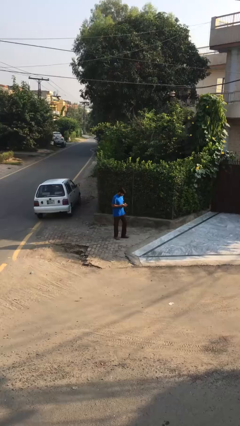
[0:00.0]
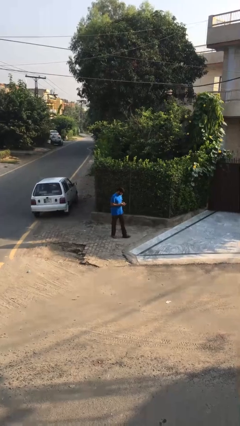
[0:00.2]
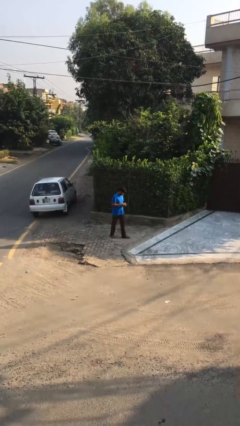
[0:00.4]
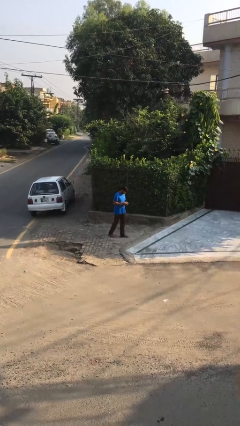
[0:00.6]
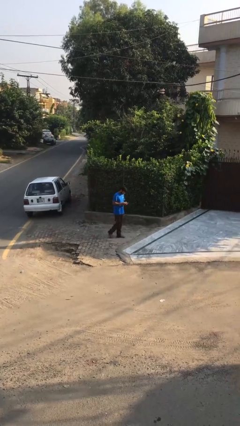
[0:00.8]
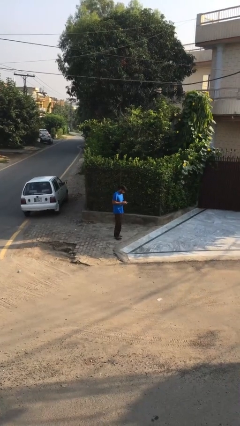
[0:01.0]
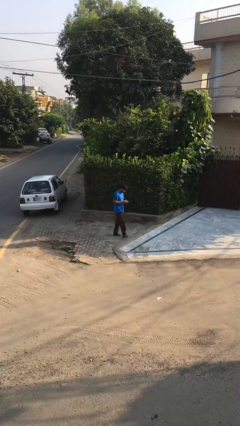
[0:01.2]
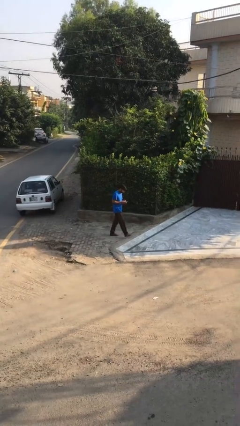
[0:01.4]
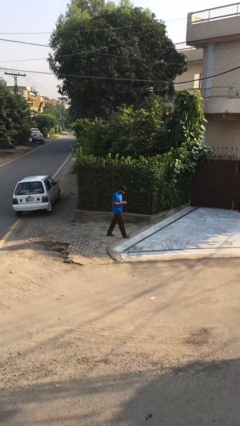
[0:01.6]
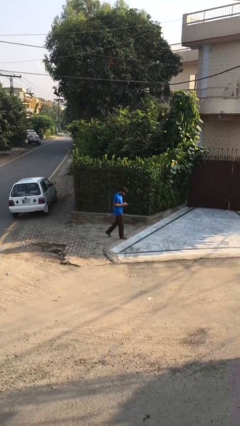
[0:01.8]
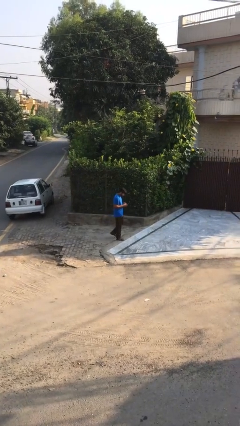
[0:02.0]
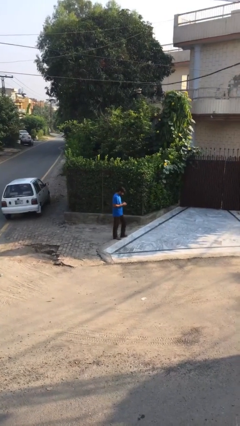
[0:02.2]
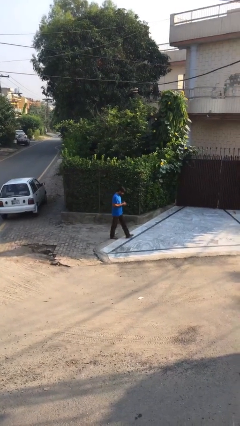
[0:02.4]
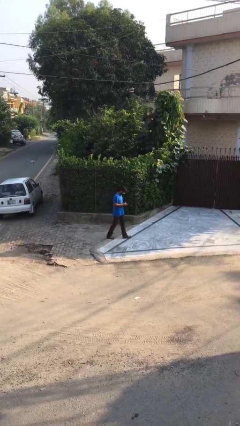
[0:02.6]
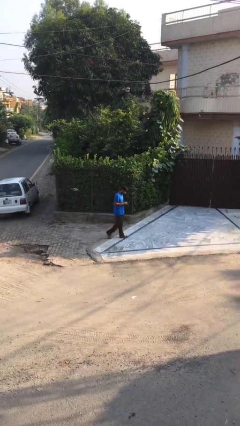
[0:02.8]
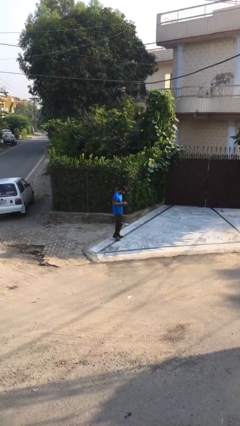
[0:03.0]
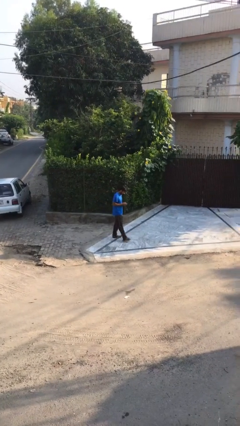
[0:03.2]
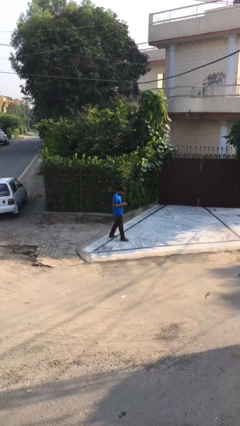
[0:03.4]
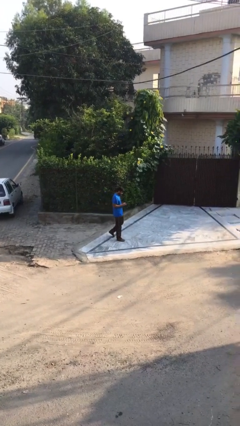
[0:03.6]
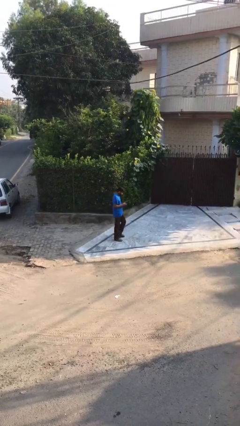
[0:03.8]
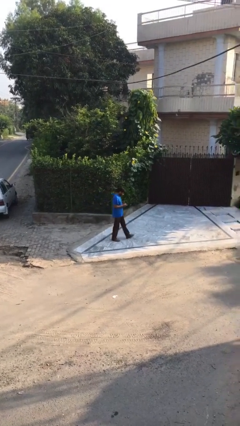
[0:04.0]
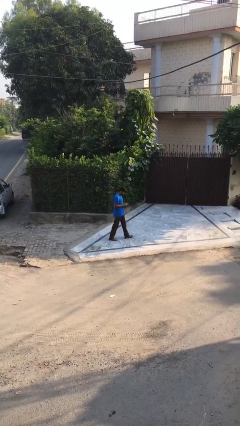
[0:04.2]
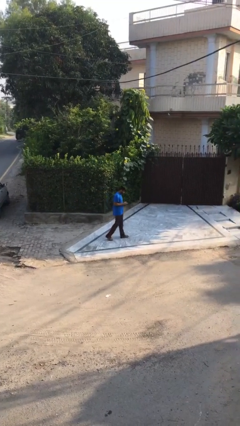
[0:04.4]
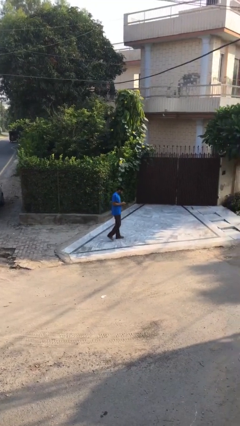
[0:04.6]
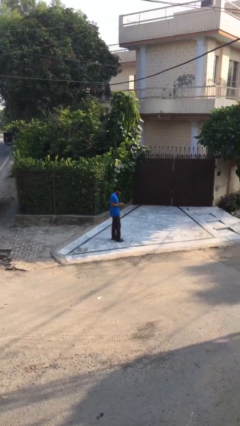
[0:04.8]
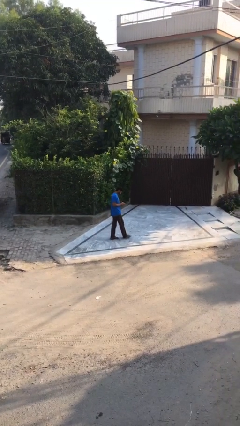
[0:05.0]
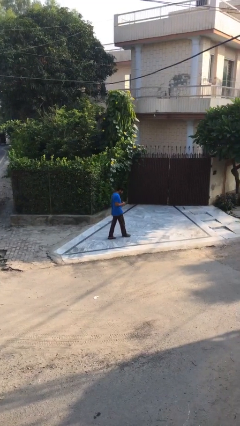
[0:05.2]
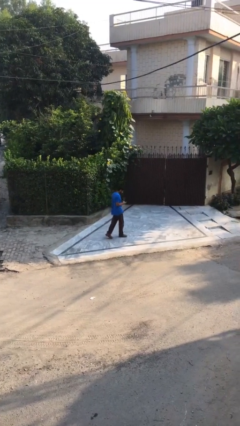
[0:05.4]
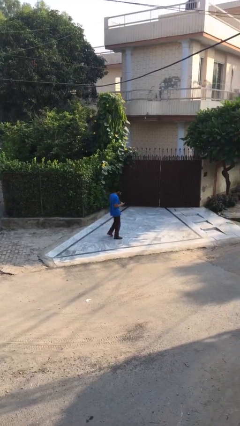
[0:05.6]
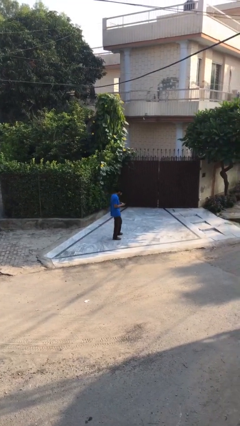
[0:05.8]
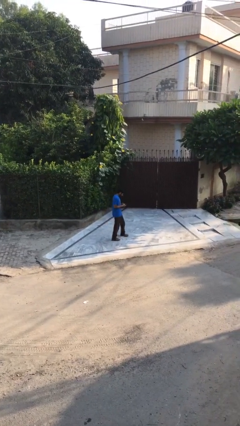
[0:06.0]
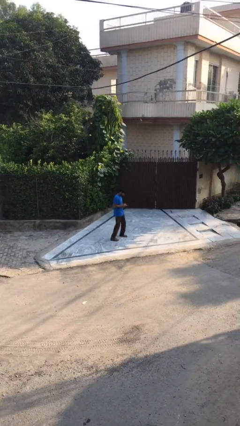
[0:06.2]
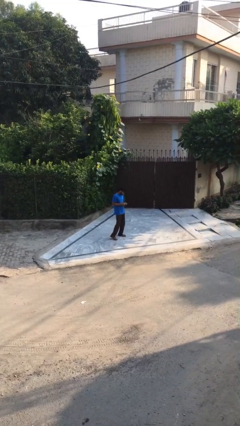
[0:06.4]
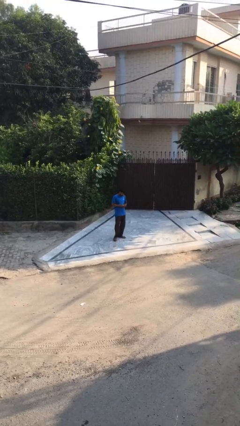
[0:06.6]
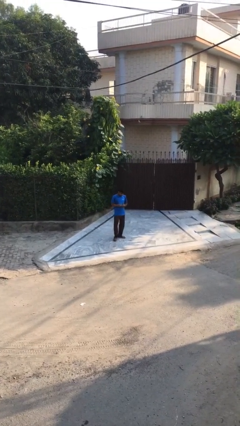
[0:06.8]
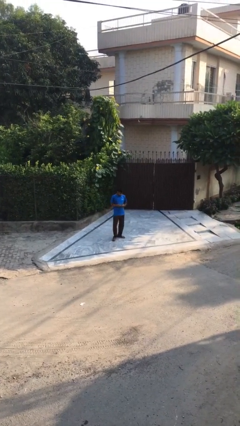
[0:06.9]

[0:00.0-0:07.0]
person texts on phone

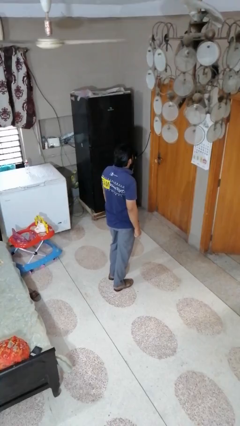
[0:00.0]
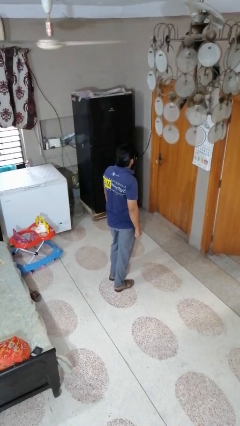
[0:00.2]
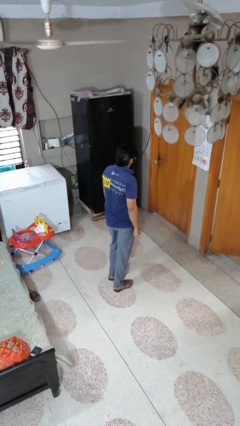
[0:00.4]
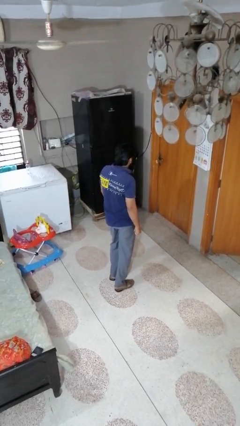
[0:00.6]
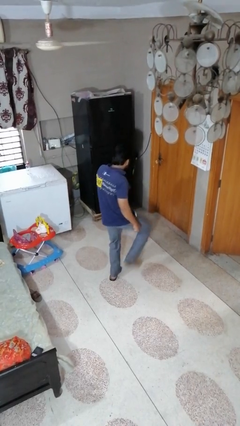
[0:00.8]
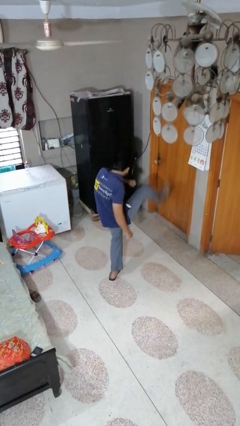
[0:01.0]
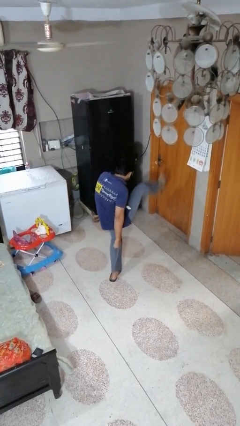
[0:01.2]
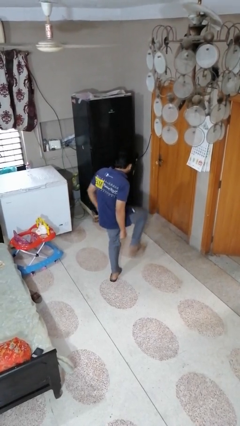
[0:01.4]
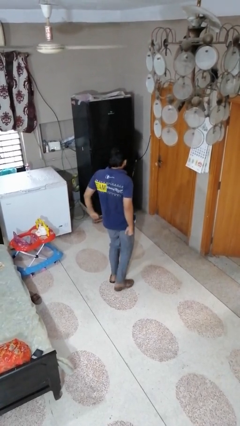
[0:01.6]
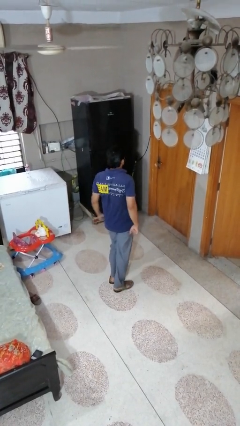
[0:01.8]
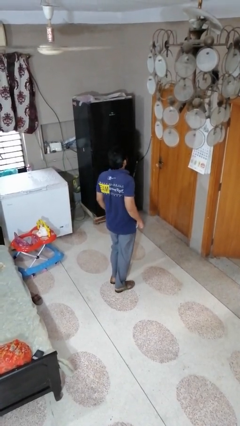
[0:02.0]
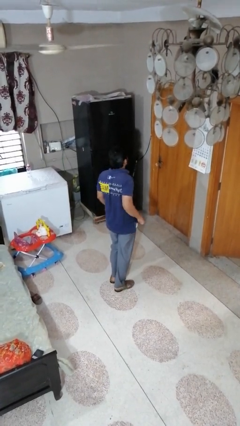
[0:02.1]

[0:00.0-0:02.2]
person karate kicks

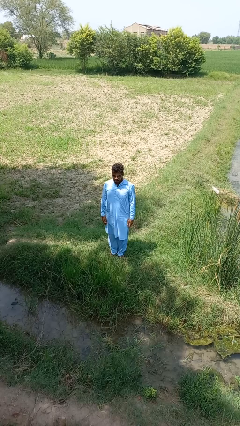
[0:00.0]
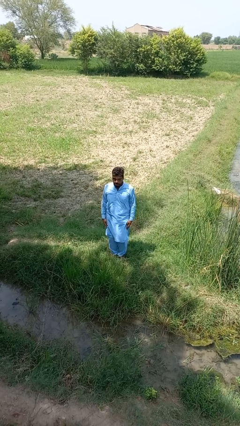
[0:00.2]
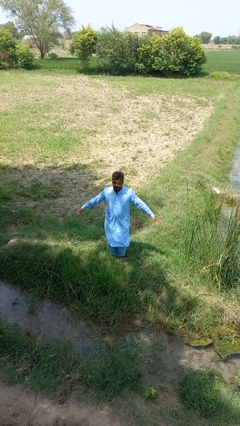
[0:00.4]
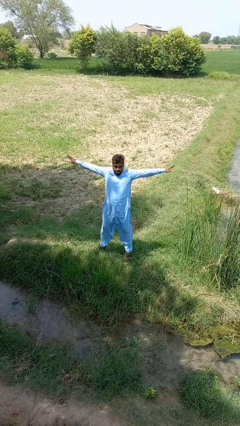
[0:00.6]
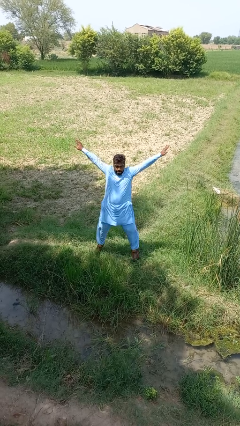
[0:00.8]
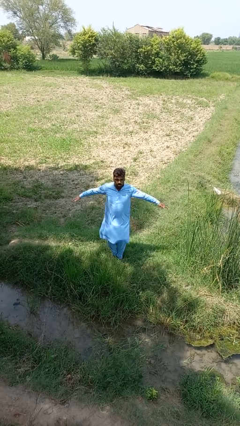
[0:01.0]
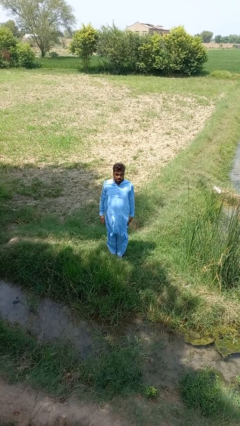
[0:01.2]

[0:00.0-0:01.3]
person exercises with jumping jacks

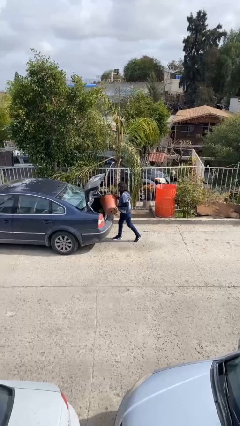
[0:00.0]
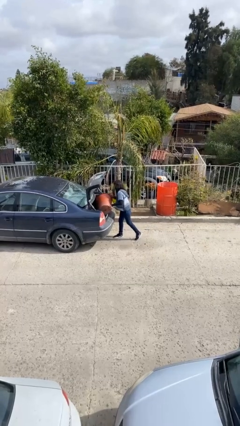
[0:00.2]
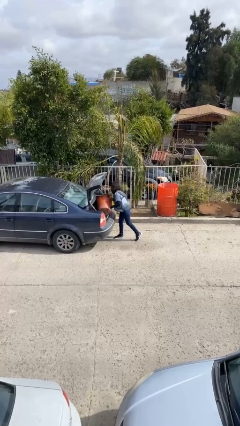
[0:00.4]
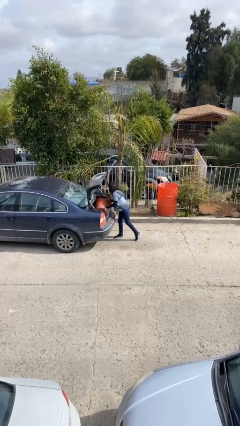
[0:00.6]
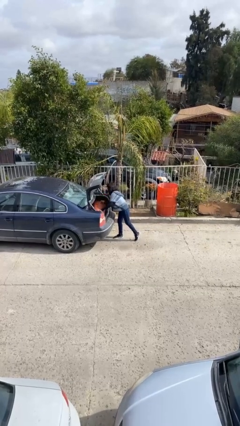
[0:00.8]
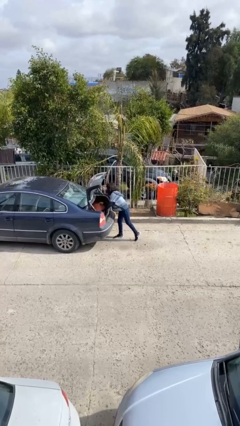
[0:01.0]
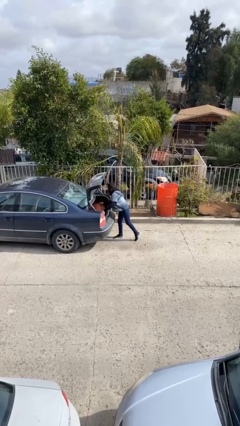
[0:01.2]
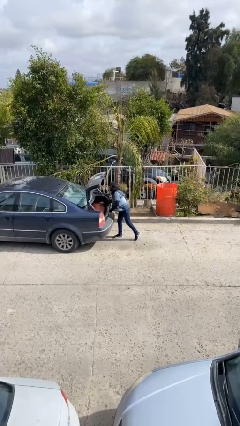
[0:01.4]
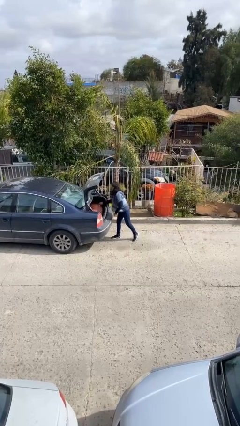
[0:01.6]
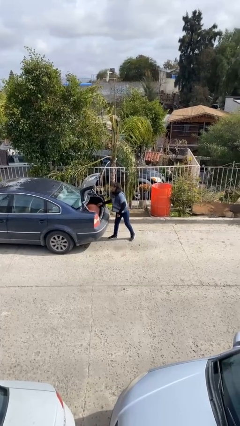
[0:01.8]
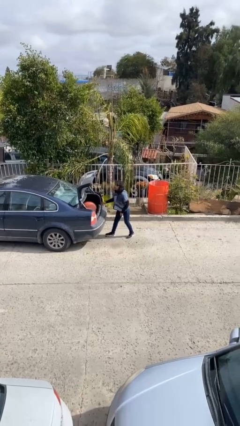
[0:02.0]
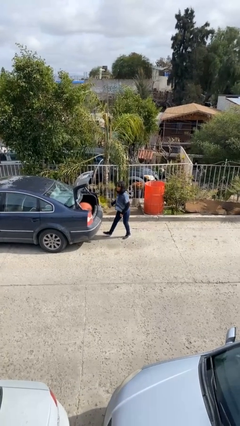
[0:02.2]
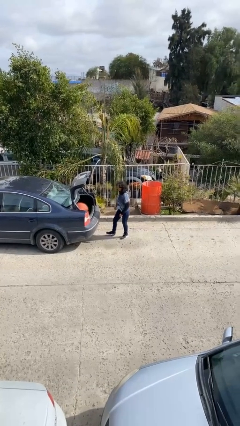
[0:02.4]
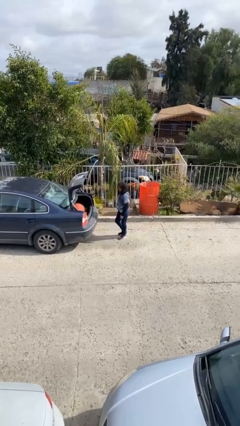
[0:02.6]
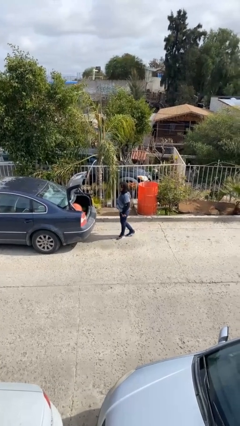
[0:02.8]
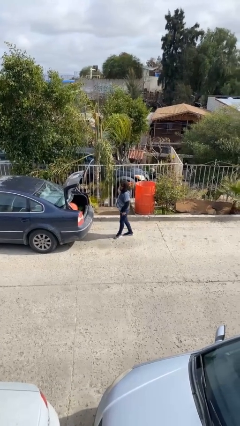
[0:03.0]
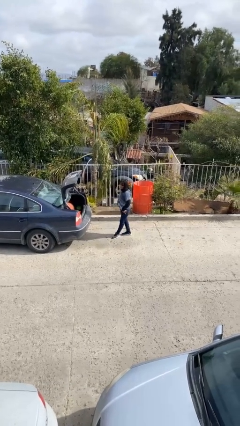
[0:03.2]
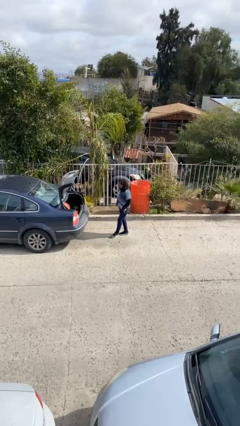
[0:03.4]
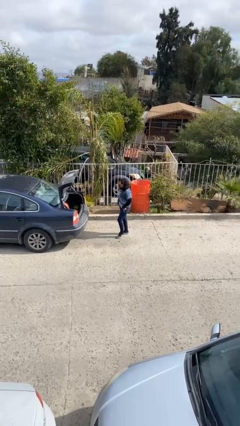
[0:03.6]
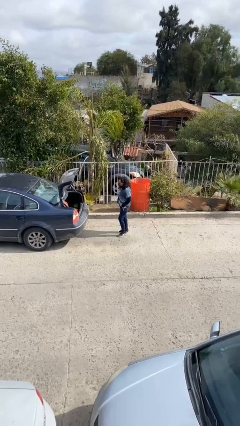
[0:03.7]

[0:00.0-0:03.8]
person loads car

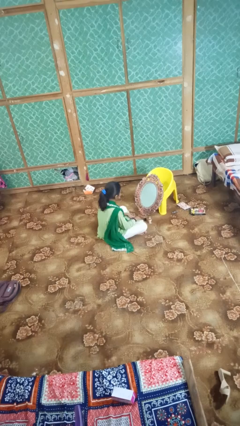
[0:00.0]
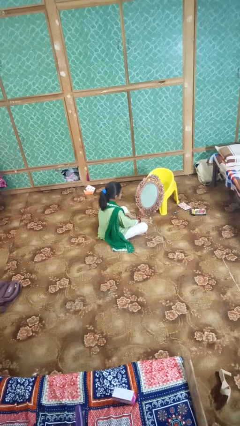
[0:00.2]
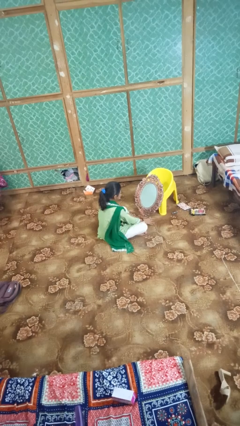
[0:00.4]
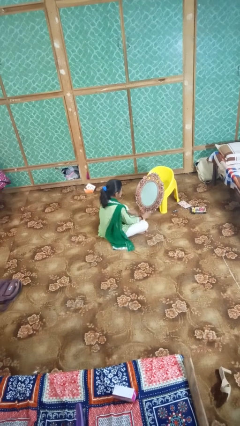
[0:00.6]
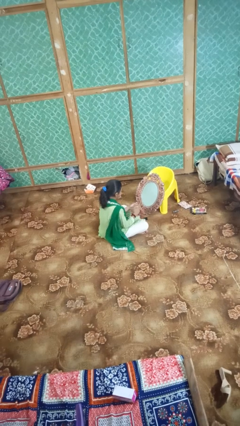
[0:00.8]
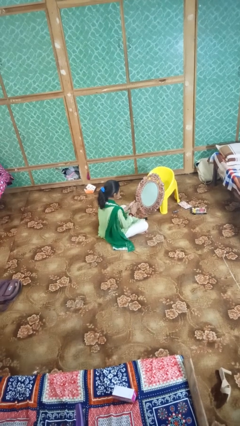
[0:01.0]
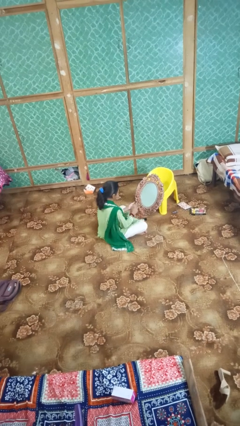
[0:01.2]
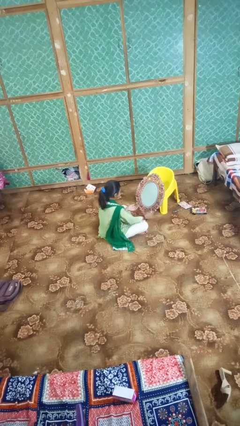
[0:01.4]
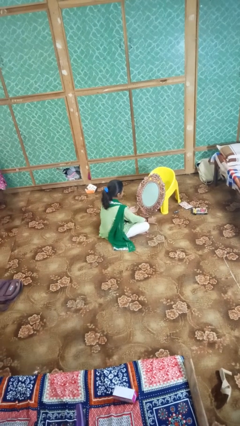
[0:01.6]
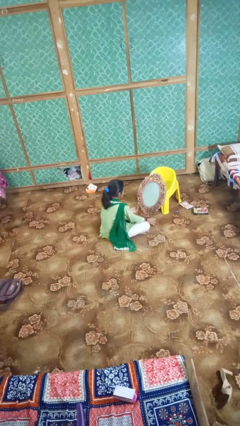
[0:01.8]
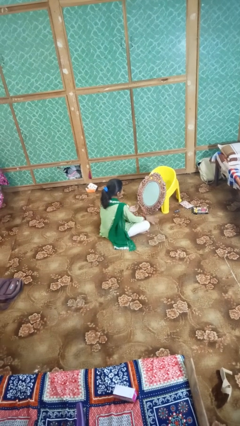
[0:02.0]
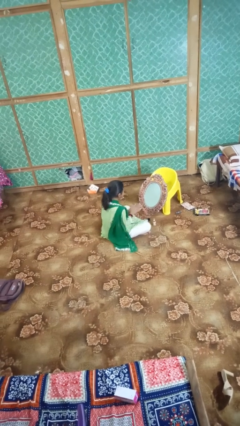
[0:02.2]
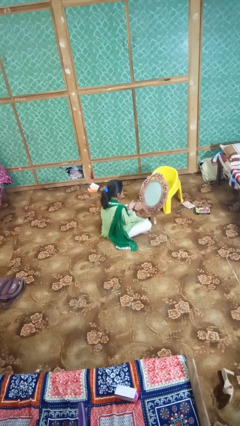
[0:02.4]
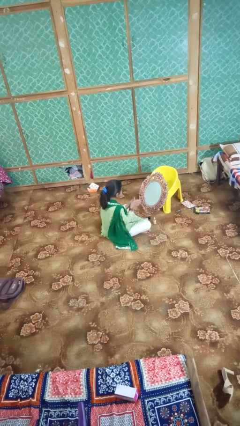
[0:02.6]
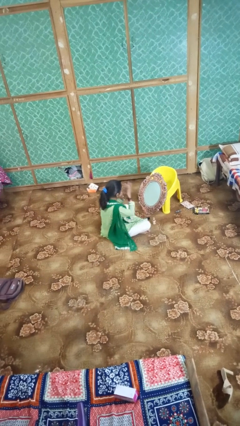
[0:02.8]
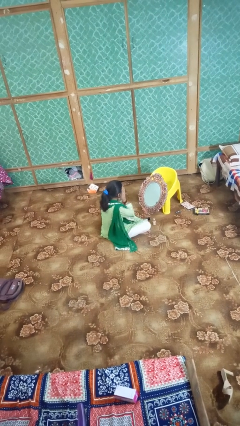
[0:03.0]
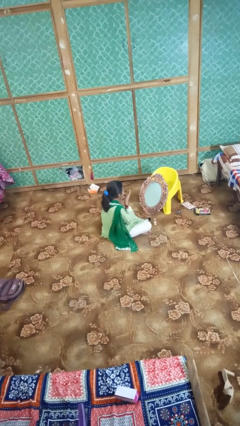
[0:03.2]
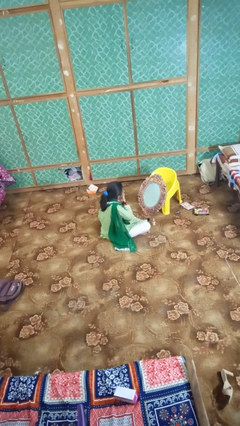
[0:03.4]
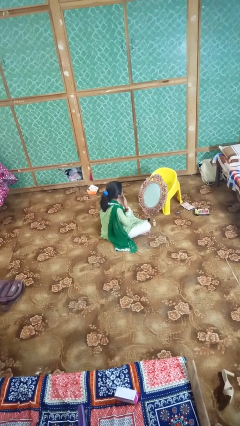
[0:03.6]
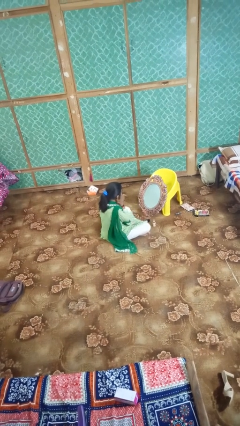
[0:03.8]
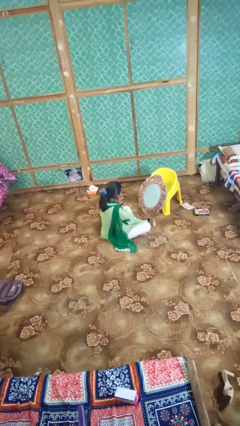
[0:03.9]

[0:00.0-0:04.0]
person applies foundation makeup
